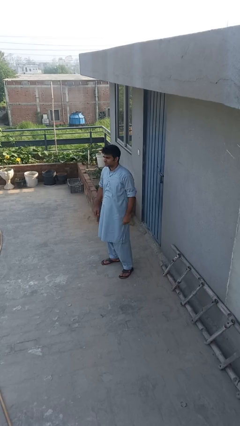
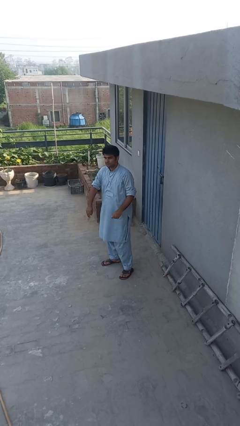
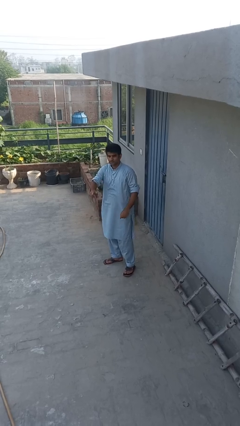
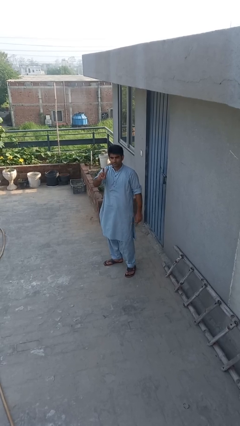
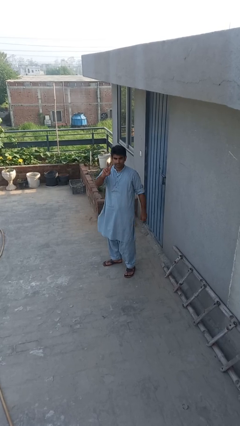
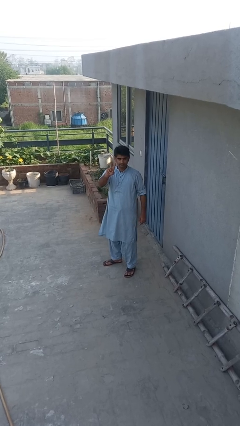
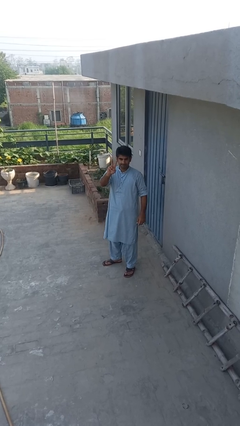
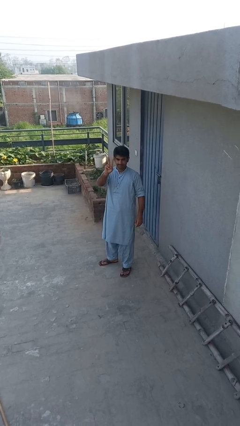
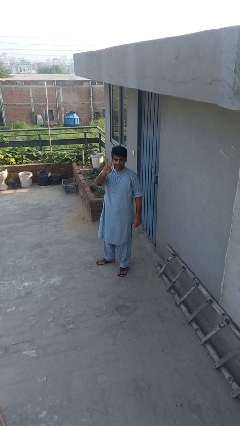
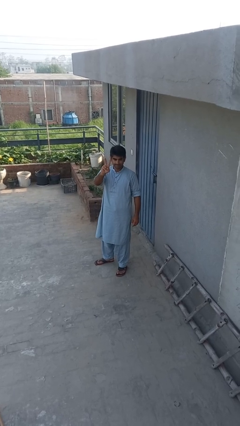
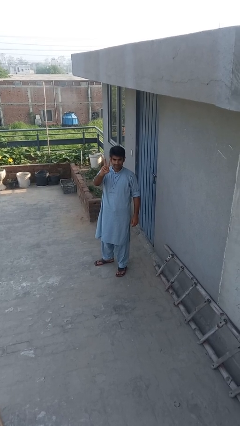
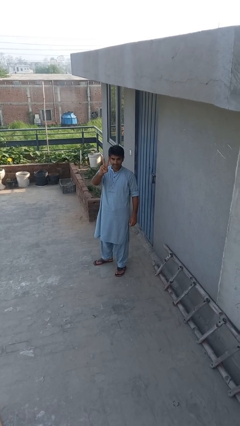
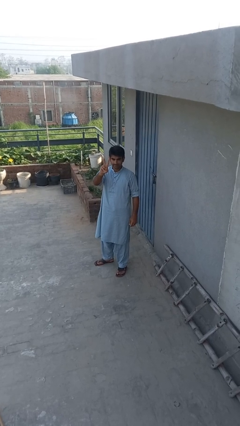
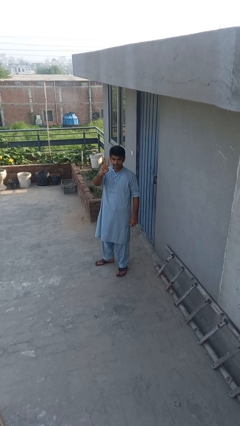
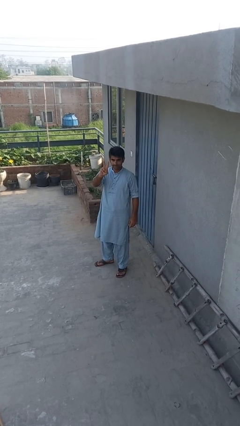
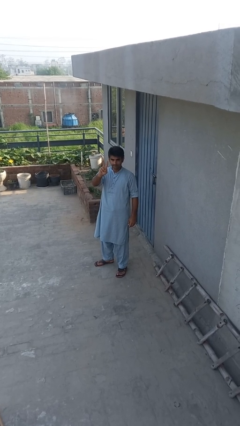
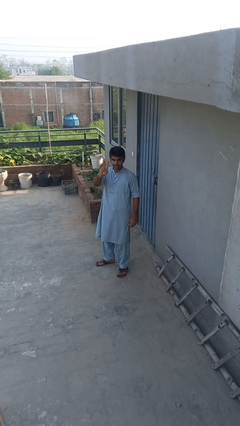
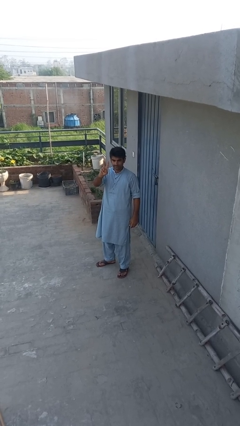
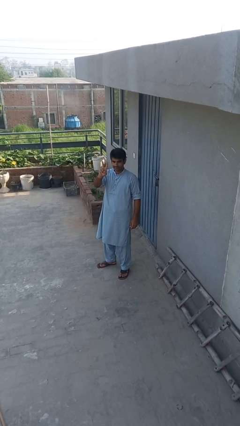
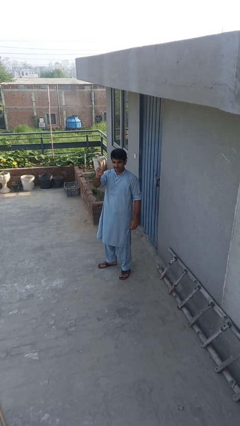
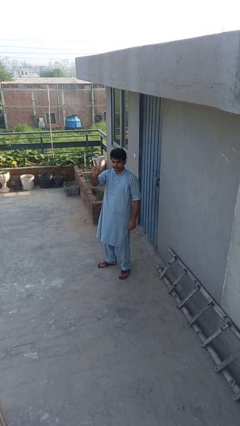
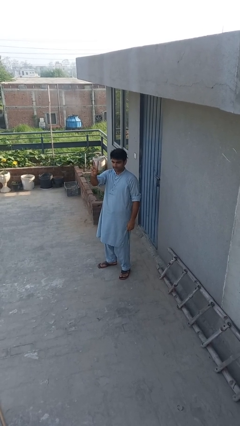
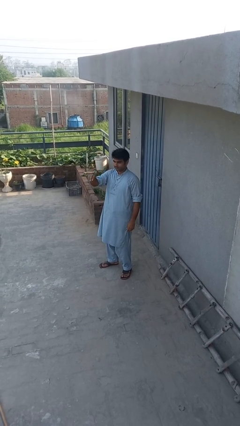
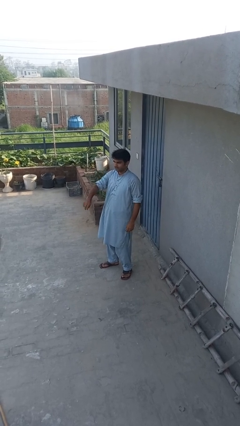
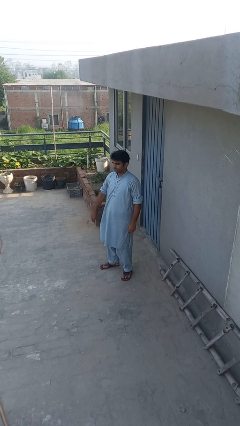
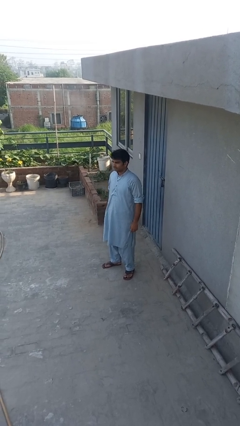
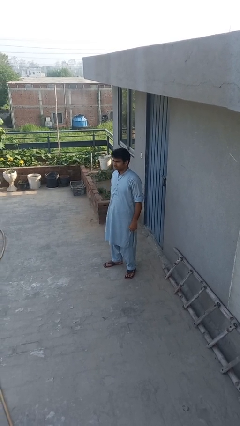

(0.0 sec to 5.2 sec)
person gestures peace

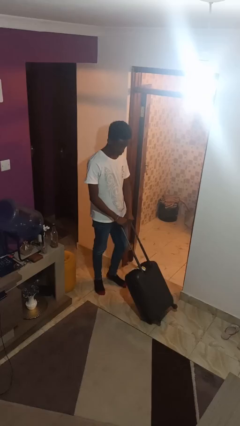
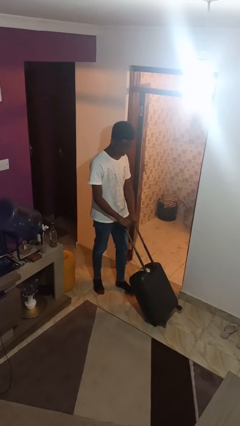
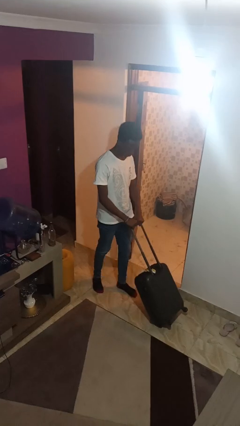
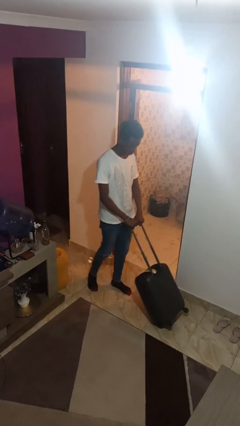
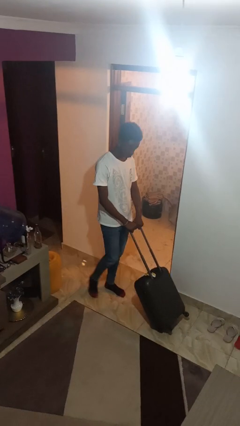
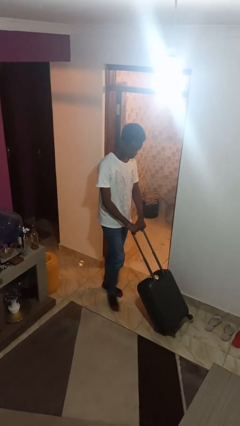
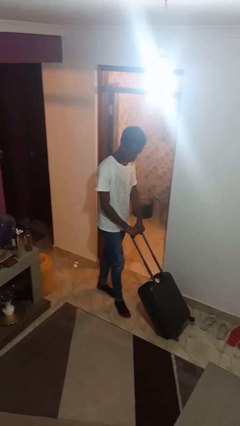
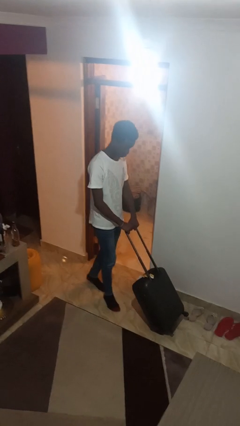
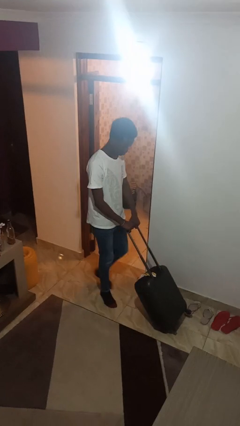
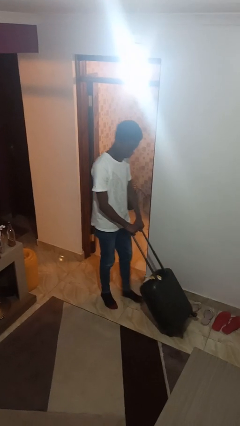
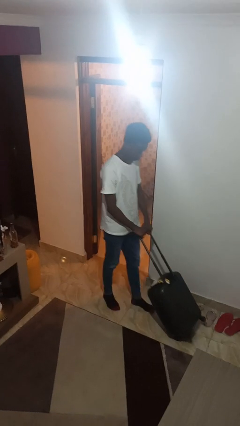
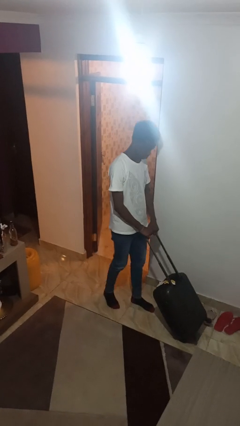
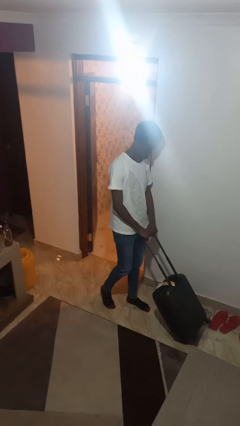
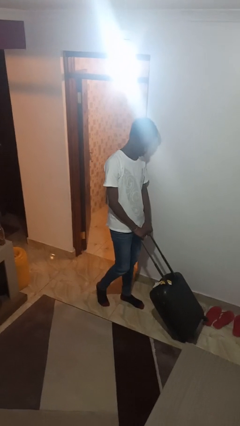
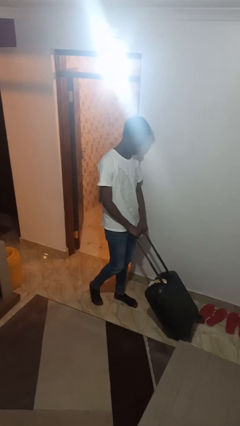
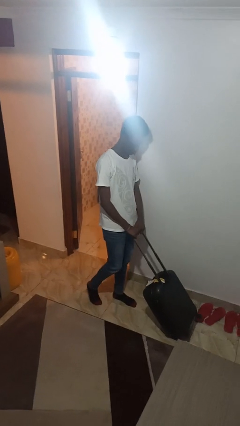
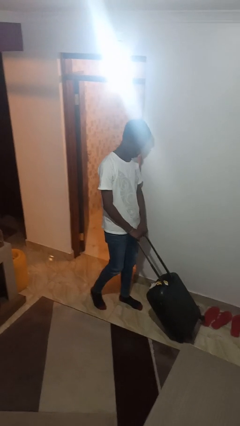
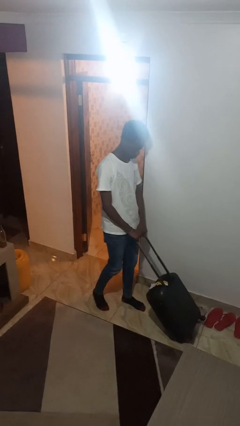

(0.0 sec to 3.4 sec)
person pushes wheeled cart

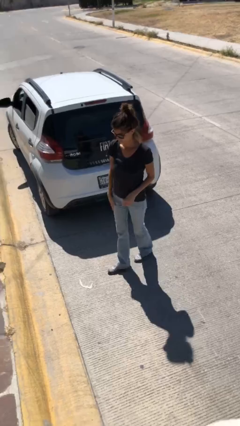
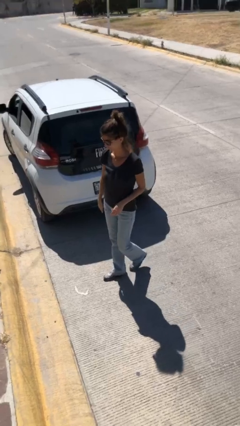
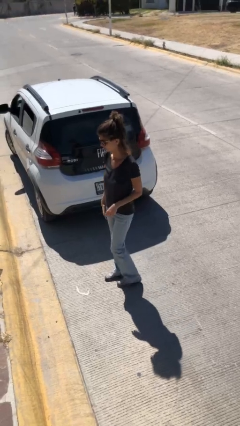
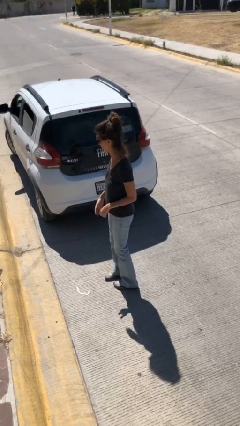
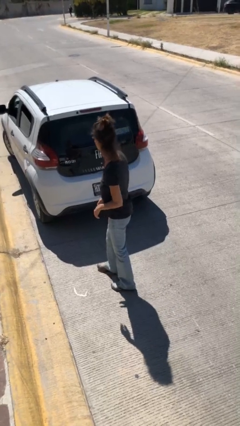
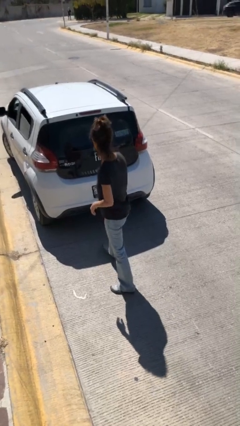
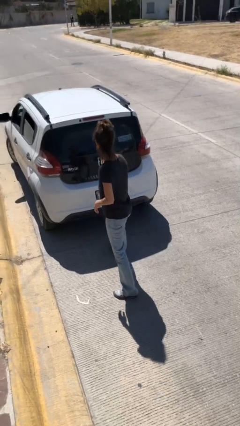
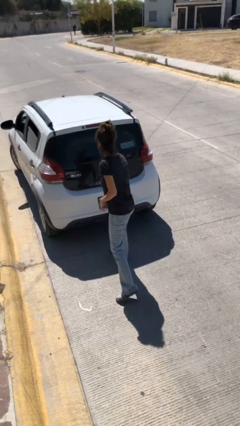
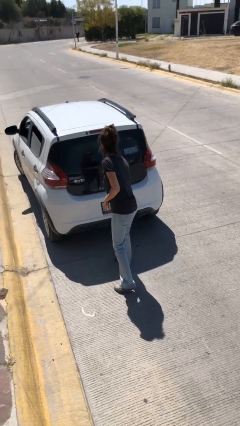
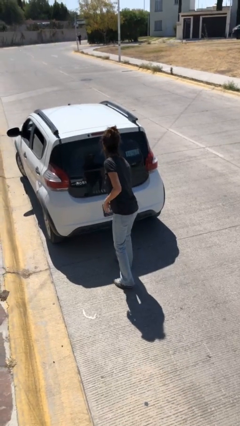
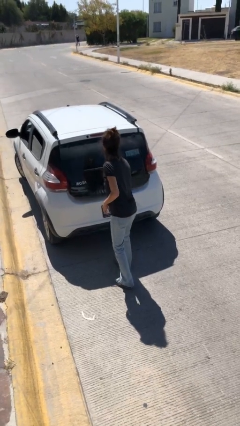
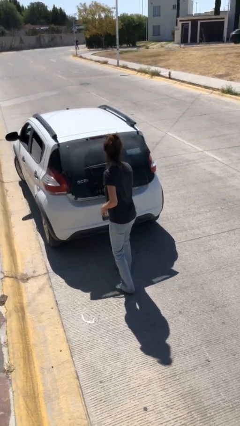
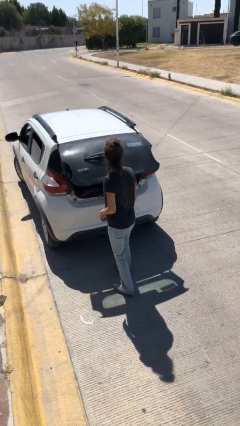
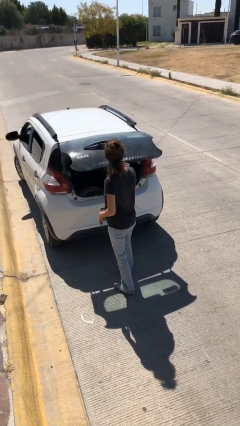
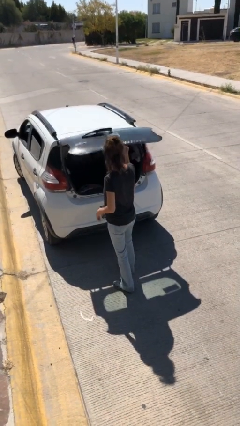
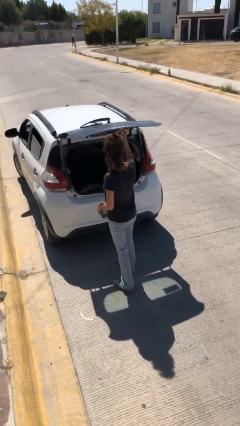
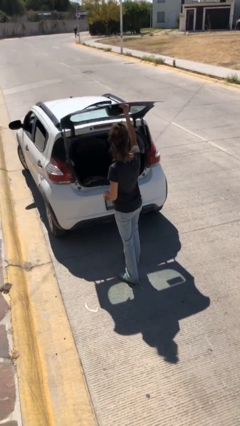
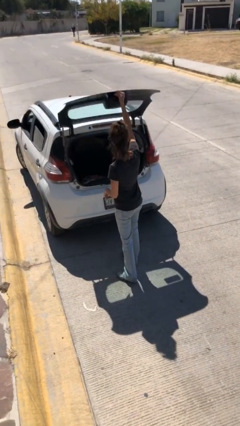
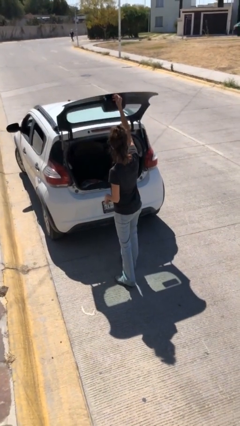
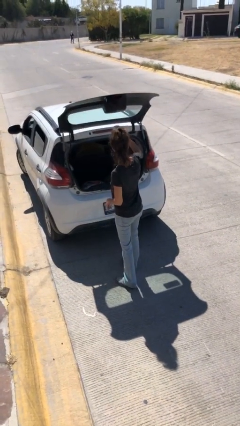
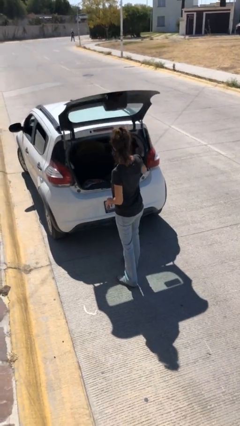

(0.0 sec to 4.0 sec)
person opens car trunk

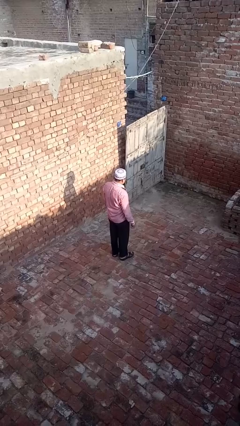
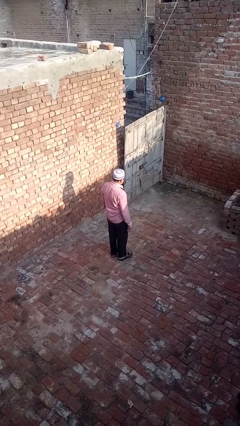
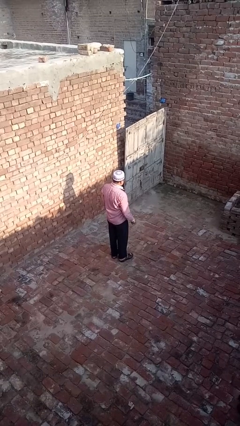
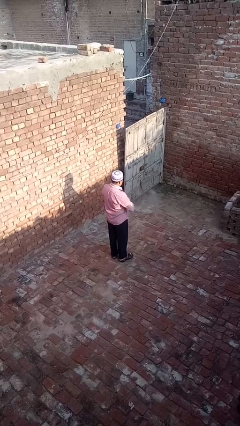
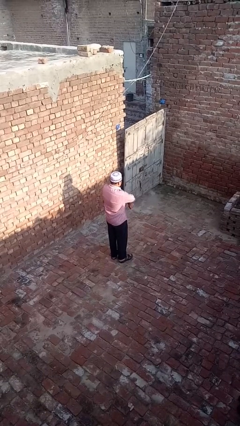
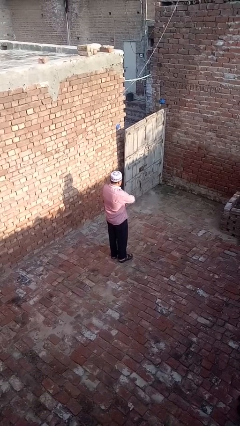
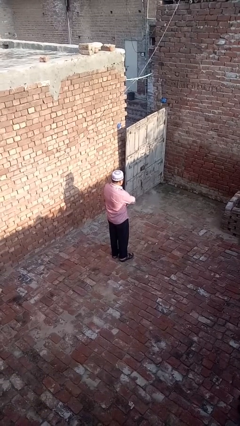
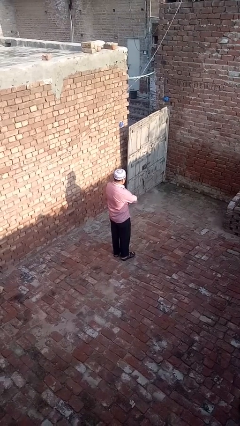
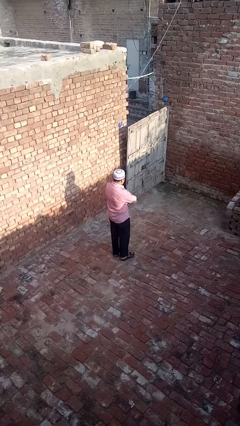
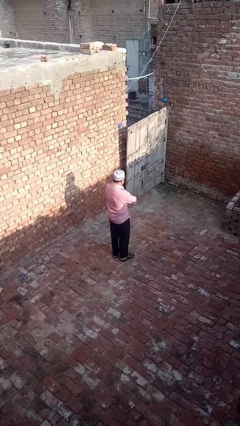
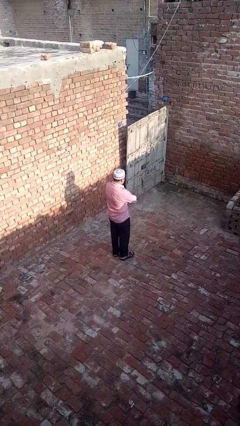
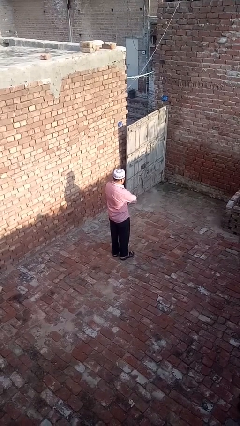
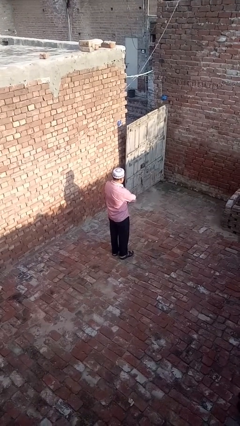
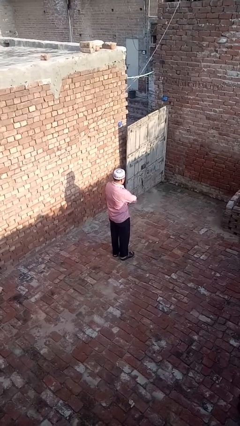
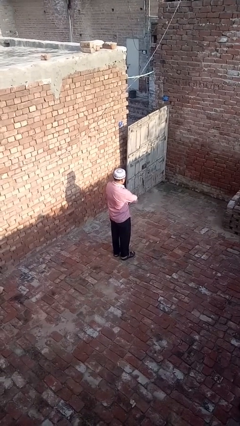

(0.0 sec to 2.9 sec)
person crosses arms

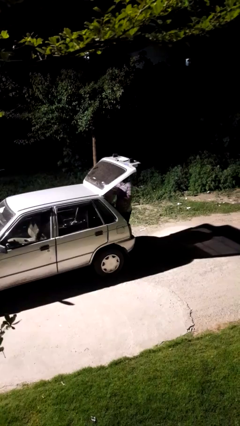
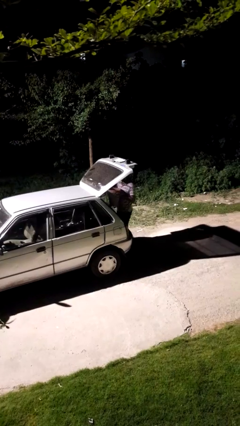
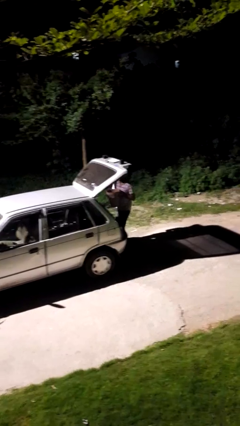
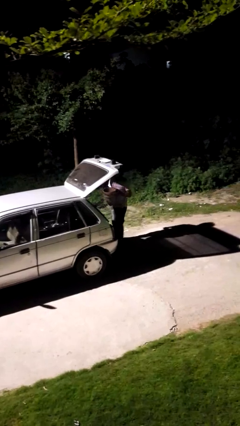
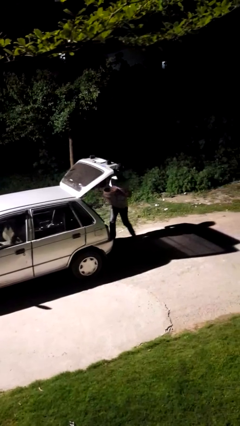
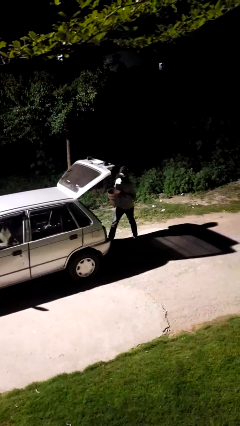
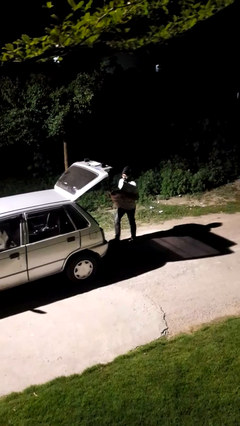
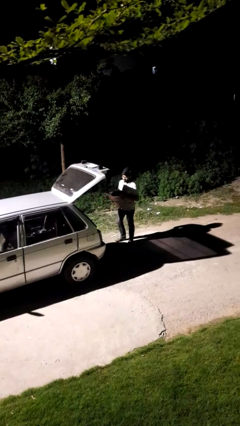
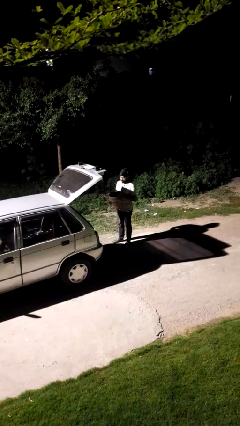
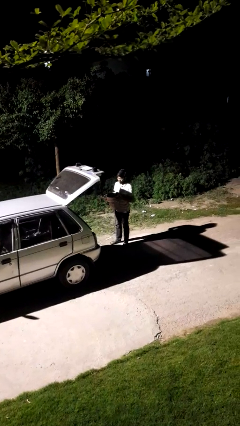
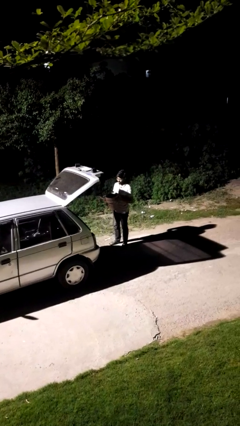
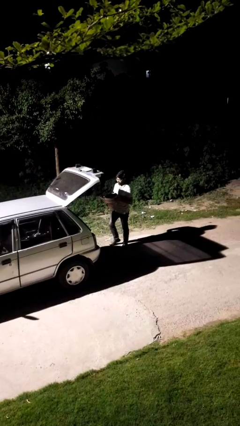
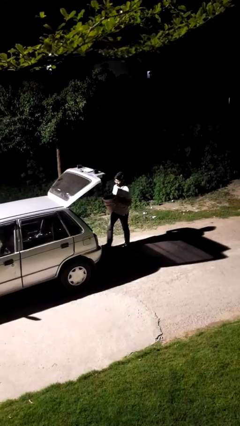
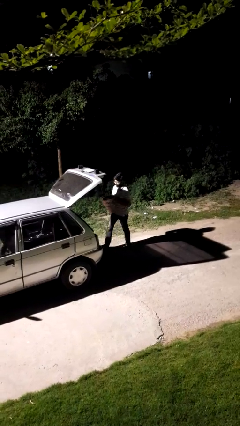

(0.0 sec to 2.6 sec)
person unloads car
